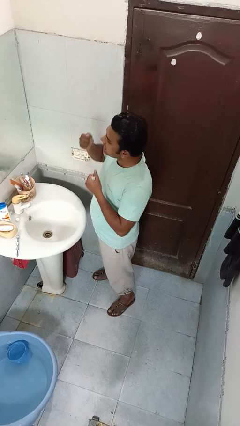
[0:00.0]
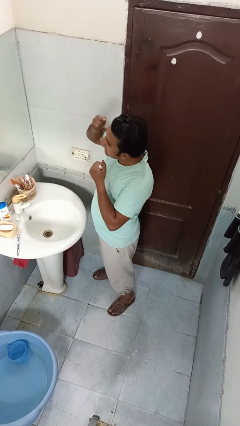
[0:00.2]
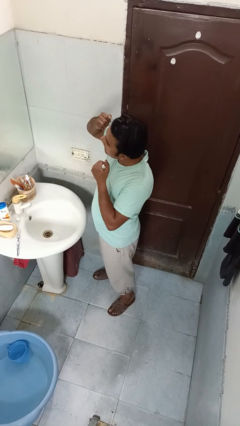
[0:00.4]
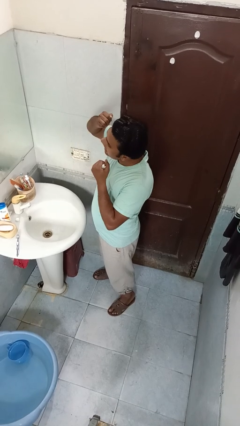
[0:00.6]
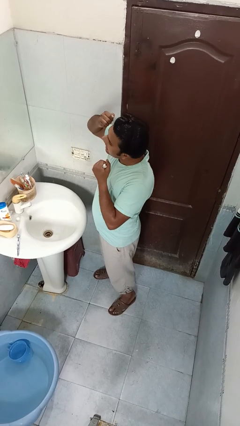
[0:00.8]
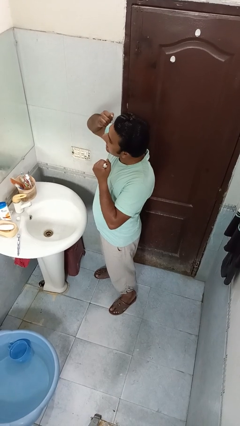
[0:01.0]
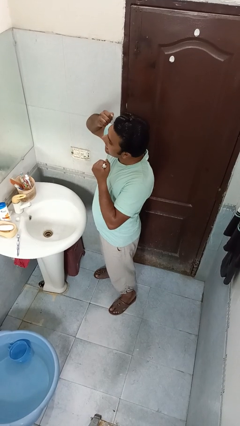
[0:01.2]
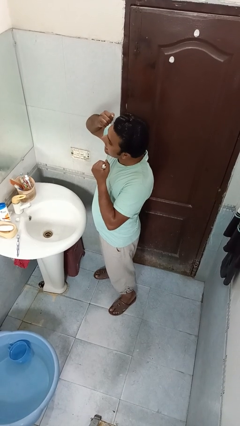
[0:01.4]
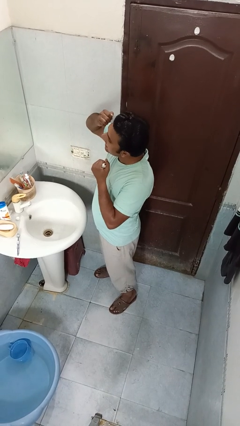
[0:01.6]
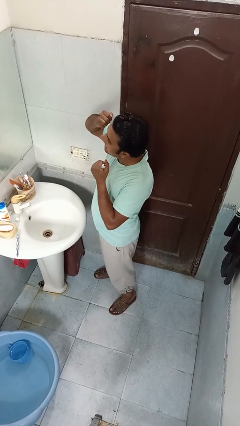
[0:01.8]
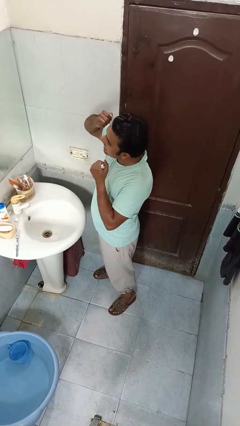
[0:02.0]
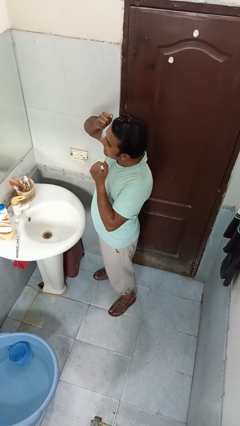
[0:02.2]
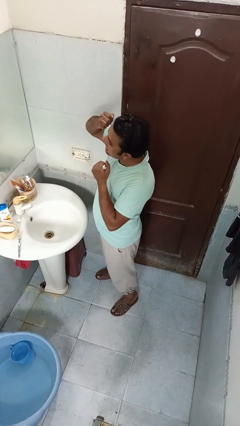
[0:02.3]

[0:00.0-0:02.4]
person flosses

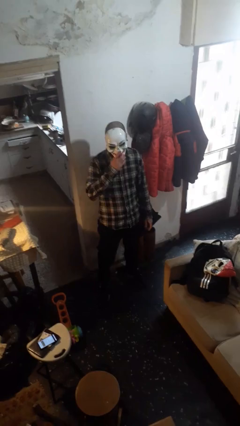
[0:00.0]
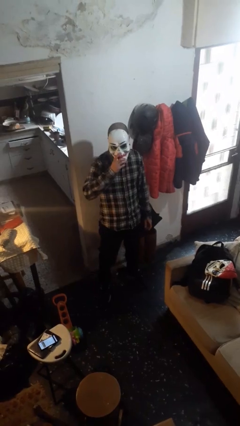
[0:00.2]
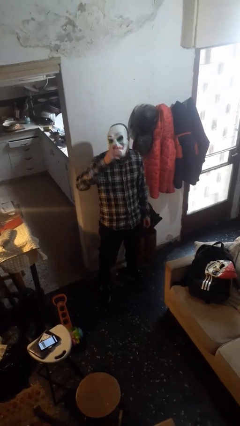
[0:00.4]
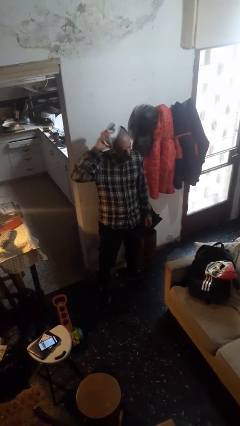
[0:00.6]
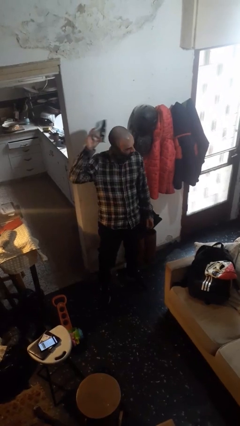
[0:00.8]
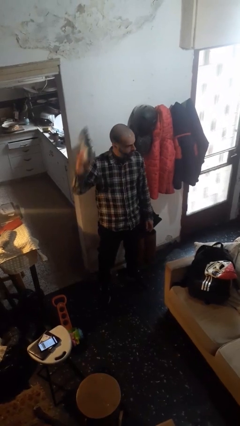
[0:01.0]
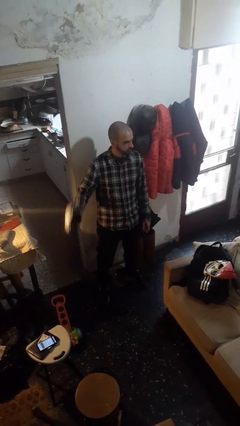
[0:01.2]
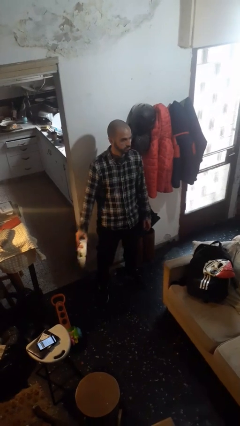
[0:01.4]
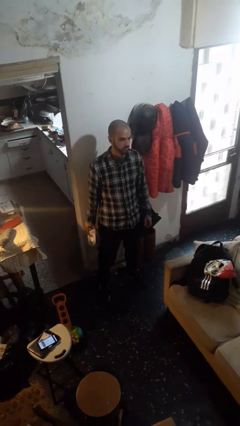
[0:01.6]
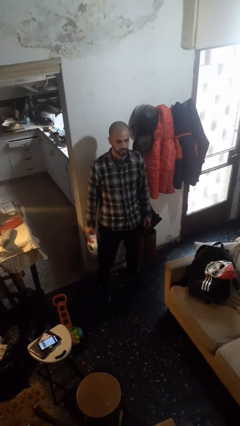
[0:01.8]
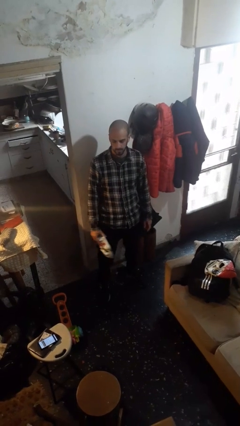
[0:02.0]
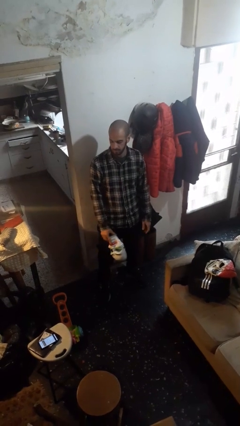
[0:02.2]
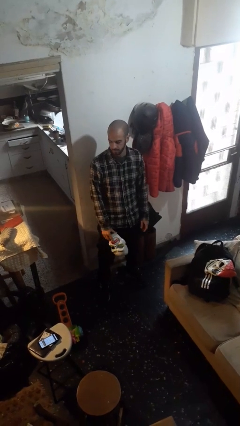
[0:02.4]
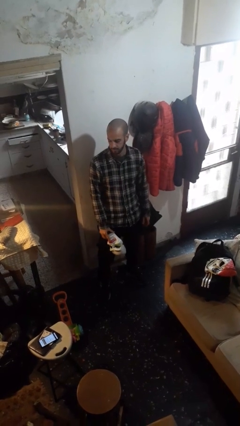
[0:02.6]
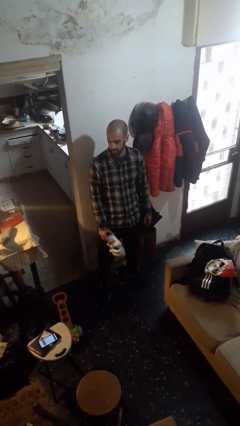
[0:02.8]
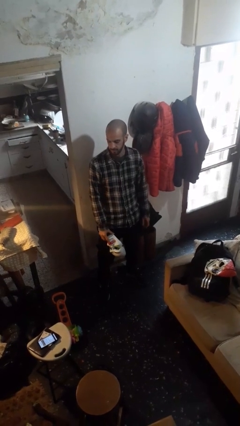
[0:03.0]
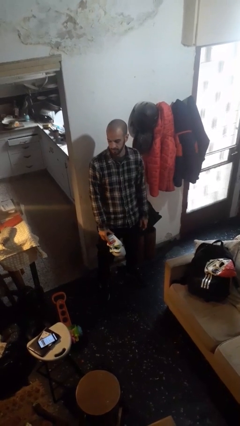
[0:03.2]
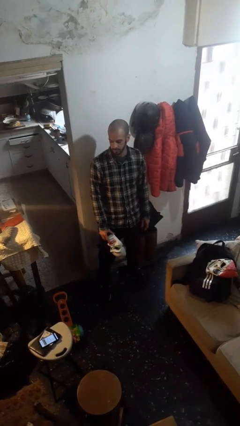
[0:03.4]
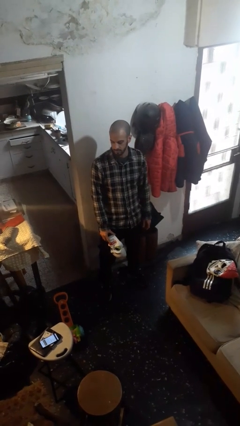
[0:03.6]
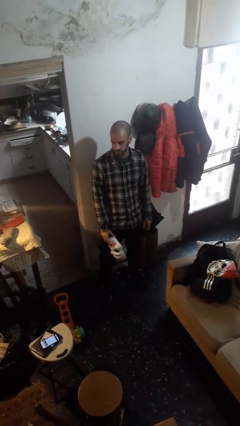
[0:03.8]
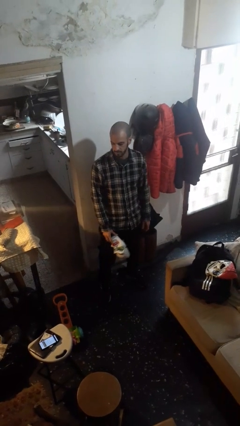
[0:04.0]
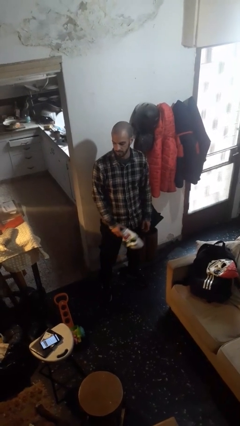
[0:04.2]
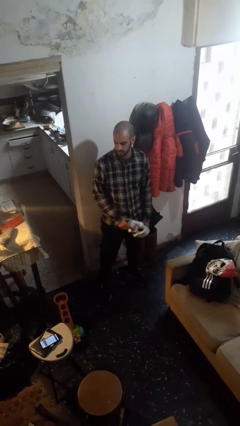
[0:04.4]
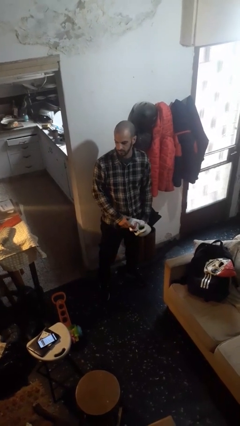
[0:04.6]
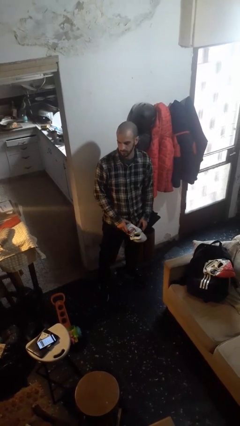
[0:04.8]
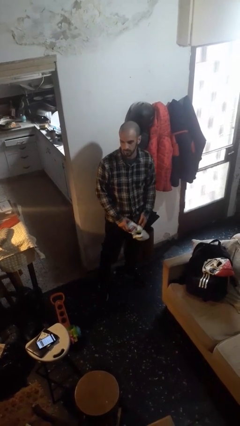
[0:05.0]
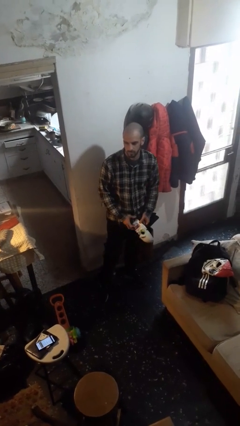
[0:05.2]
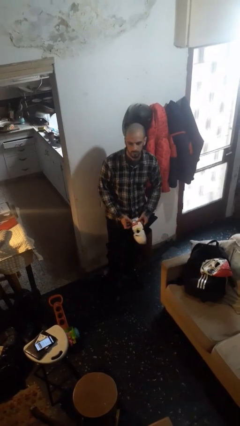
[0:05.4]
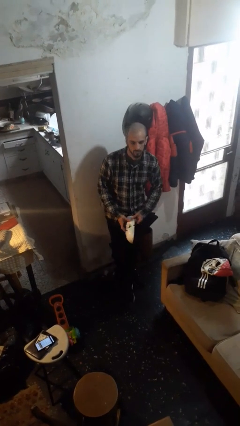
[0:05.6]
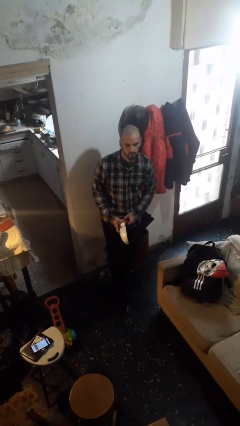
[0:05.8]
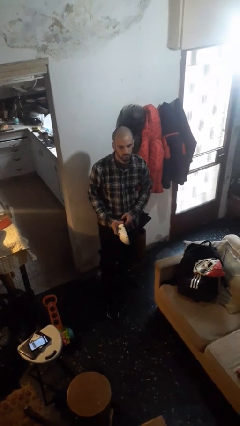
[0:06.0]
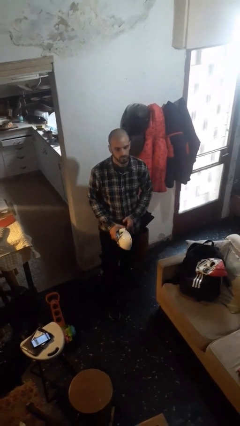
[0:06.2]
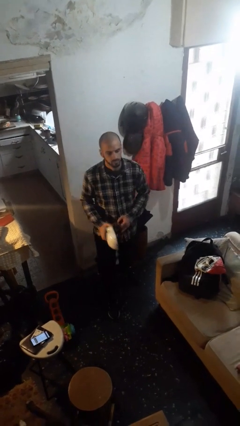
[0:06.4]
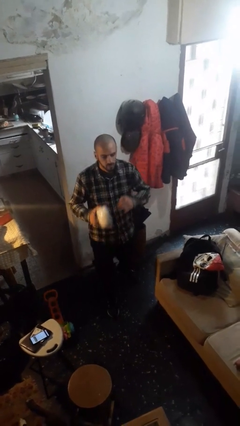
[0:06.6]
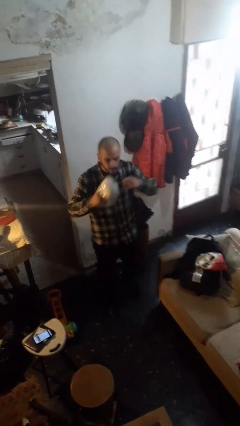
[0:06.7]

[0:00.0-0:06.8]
person takes off facemask

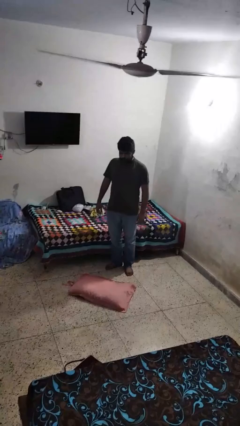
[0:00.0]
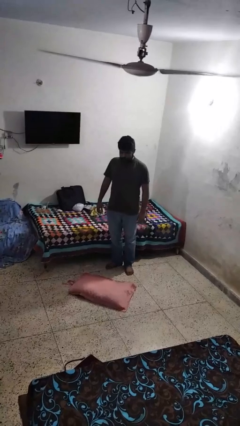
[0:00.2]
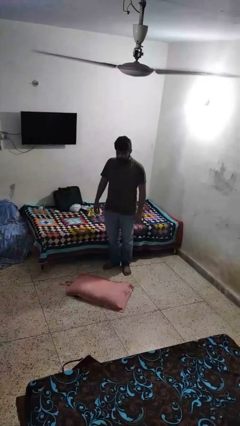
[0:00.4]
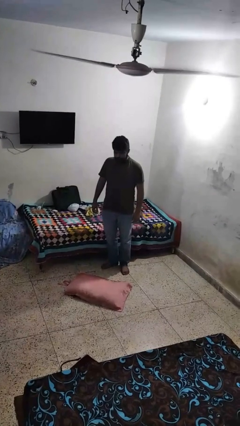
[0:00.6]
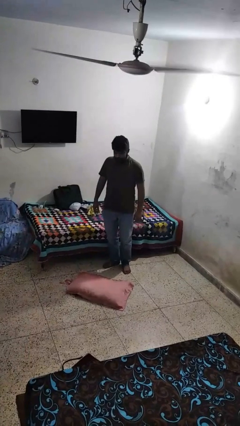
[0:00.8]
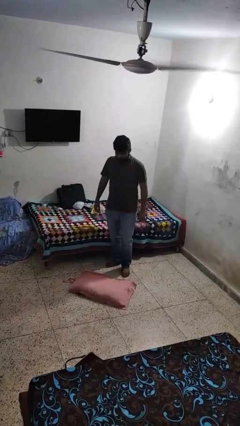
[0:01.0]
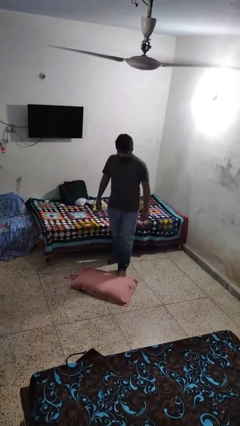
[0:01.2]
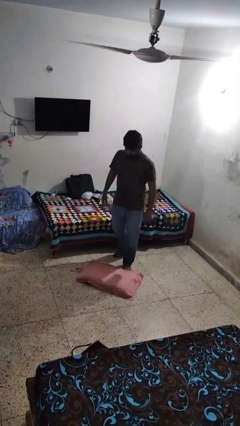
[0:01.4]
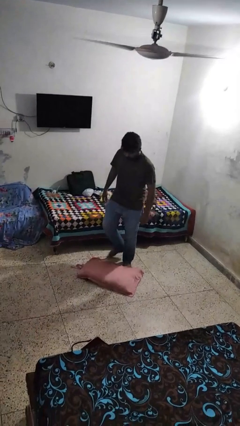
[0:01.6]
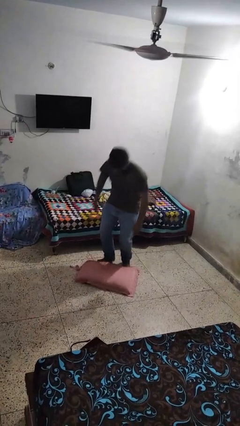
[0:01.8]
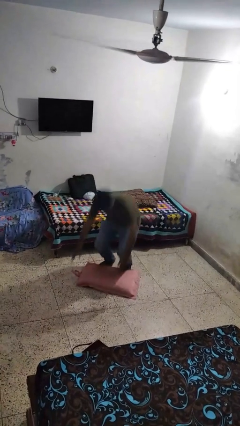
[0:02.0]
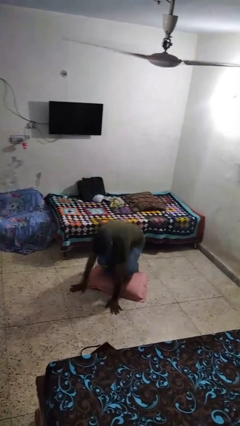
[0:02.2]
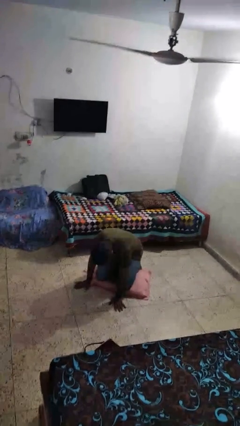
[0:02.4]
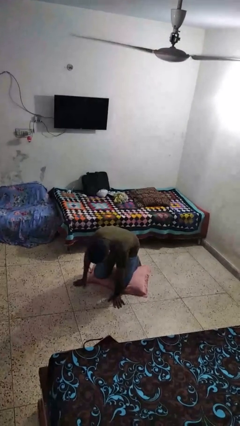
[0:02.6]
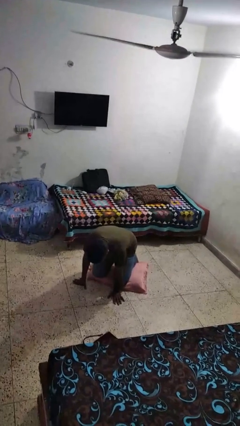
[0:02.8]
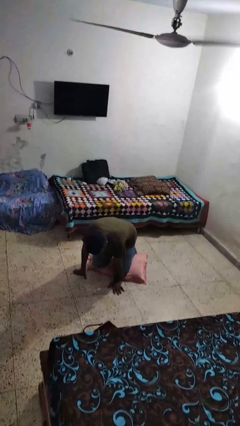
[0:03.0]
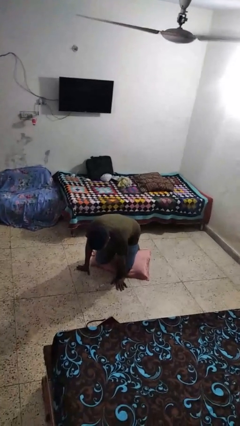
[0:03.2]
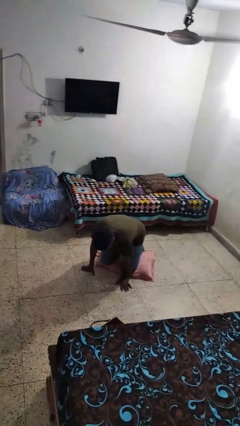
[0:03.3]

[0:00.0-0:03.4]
person trips on object on floor

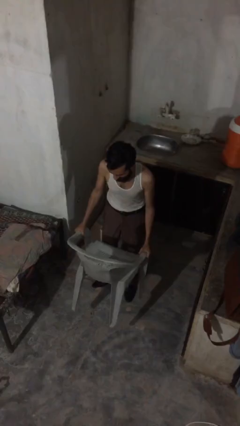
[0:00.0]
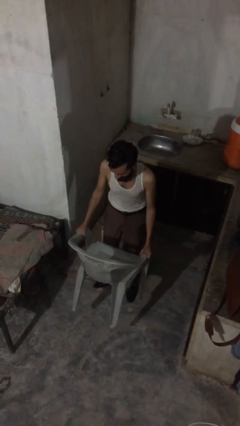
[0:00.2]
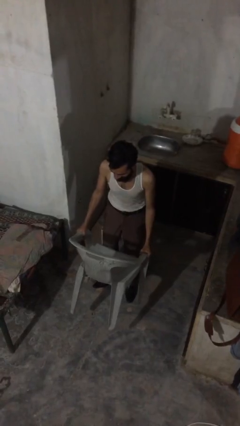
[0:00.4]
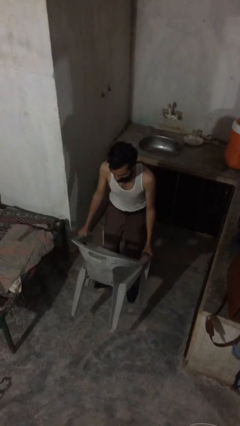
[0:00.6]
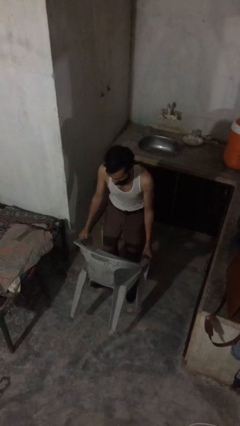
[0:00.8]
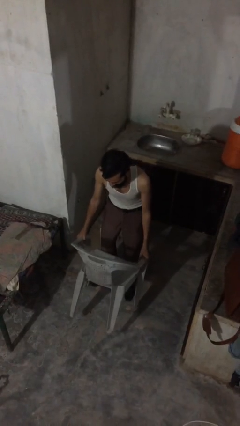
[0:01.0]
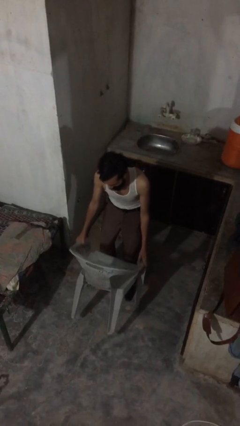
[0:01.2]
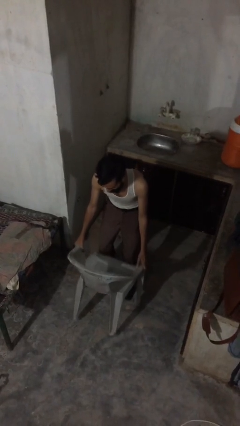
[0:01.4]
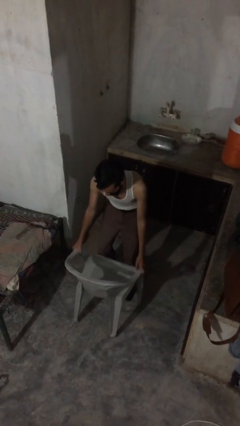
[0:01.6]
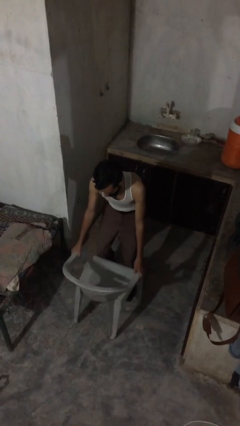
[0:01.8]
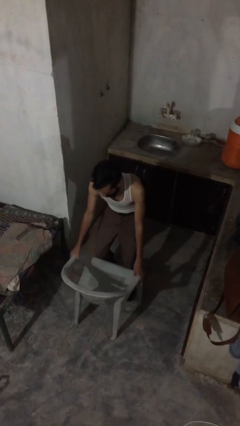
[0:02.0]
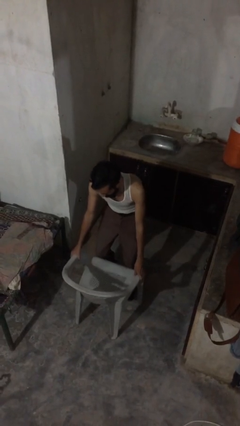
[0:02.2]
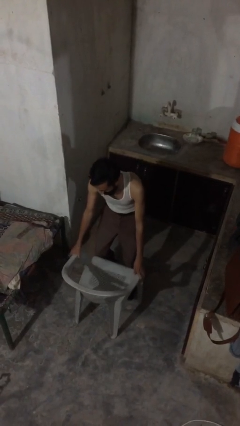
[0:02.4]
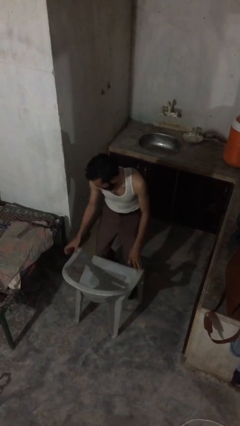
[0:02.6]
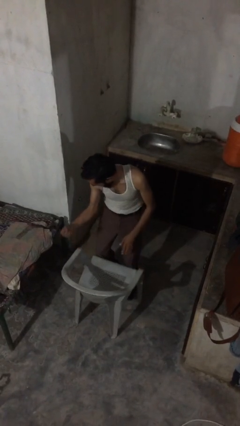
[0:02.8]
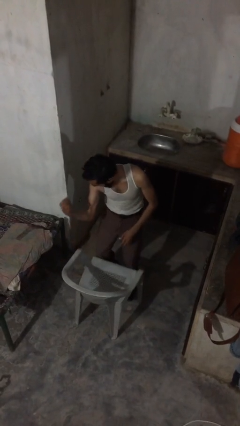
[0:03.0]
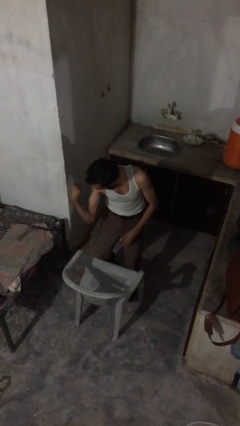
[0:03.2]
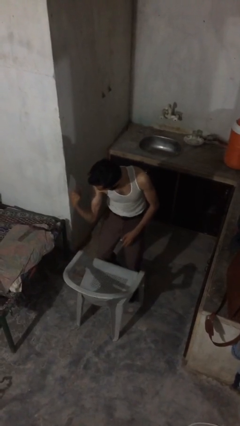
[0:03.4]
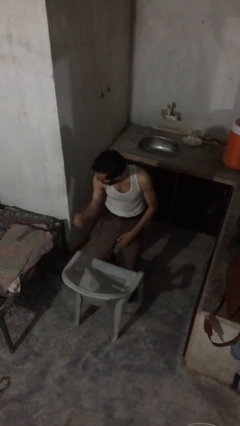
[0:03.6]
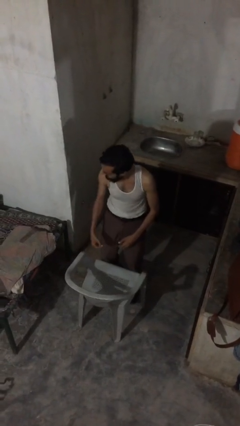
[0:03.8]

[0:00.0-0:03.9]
person puts down object on floor

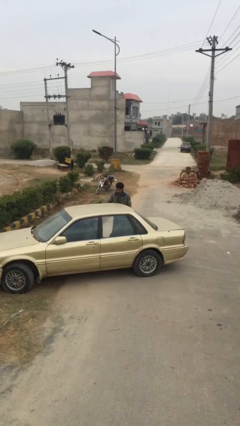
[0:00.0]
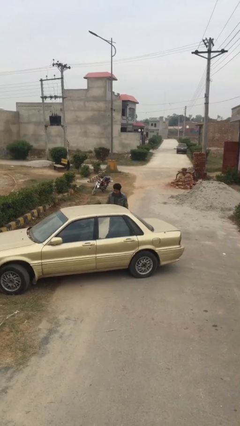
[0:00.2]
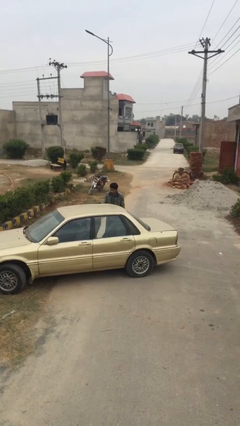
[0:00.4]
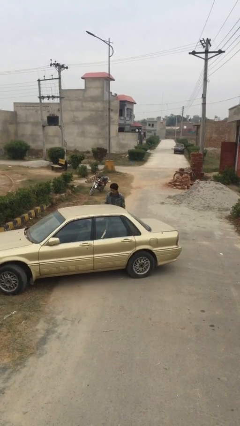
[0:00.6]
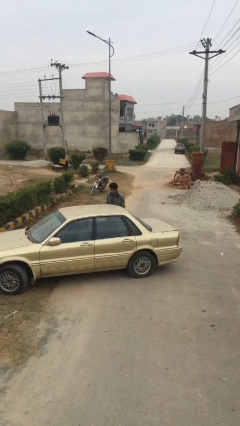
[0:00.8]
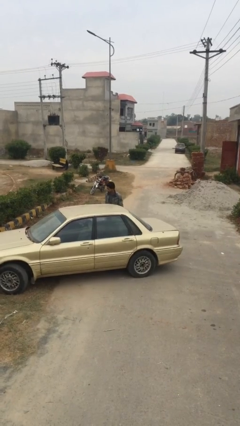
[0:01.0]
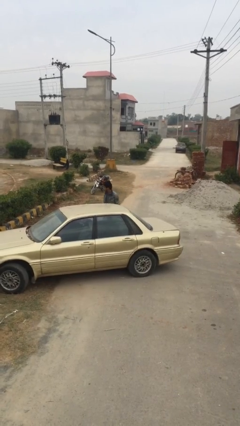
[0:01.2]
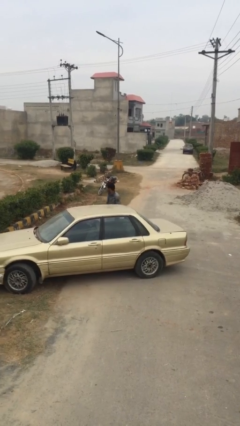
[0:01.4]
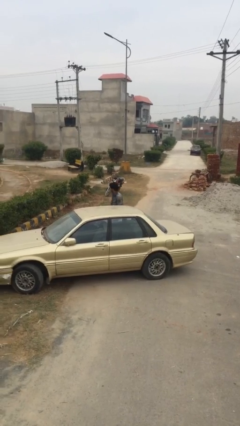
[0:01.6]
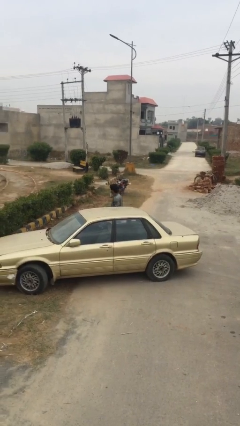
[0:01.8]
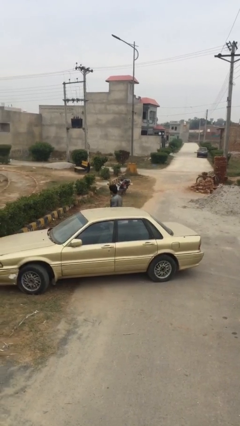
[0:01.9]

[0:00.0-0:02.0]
person closes car door
